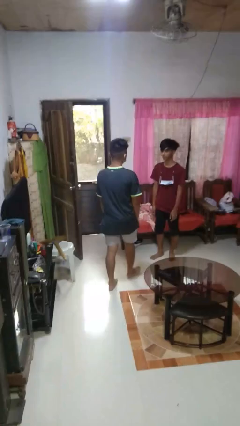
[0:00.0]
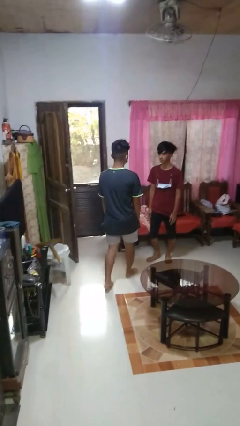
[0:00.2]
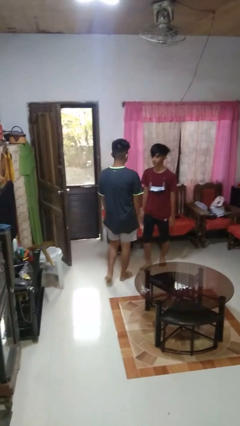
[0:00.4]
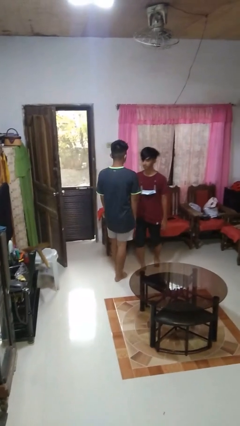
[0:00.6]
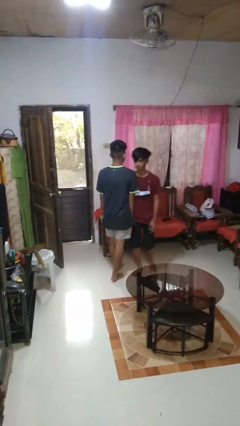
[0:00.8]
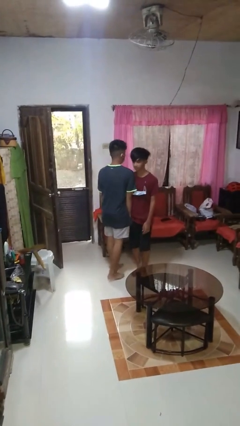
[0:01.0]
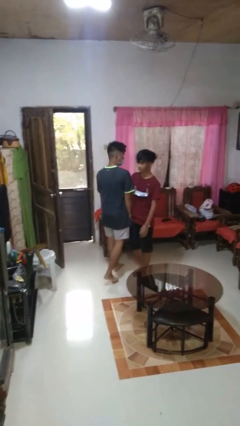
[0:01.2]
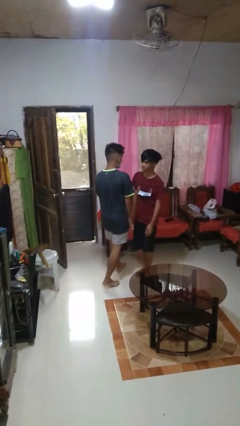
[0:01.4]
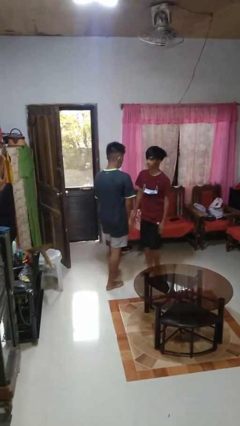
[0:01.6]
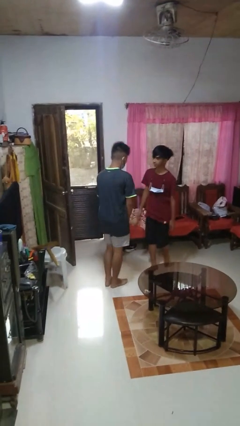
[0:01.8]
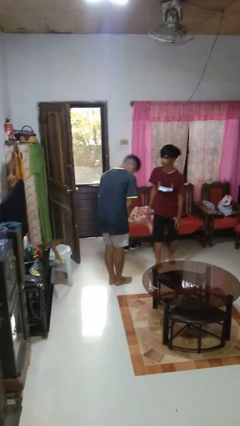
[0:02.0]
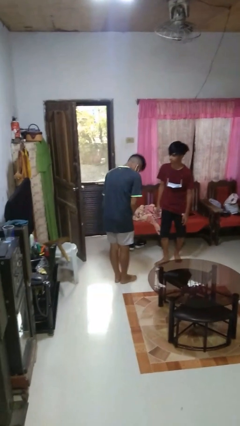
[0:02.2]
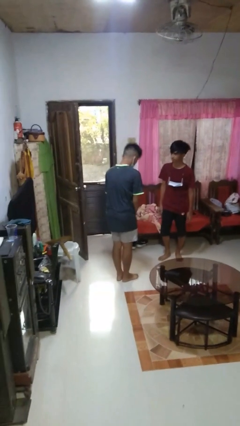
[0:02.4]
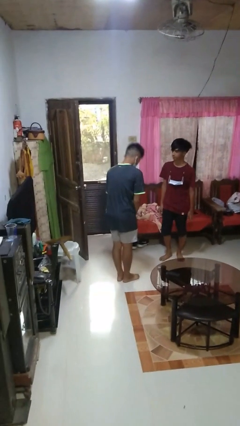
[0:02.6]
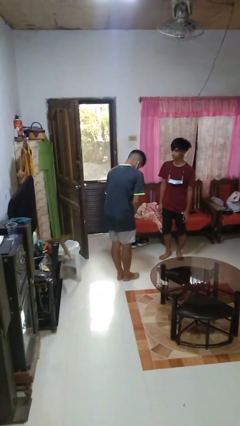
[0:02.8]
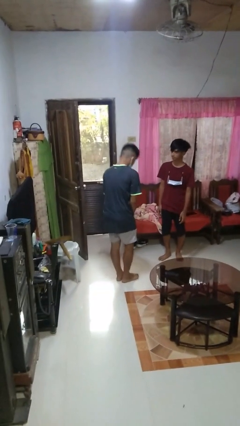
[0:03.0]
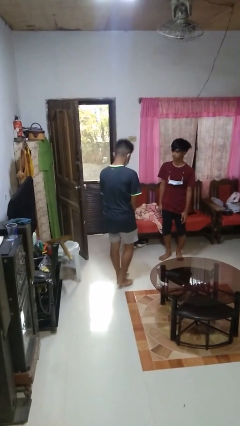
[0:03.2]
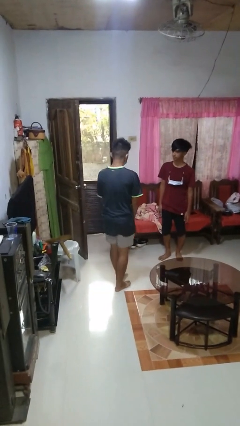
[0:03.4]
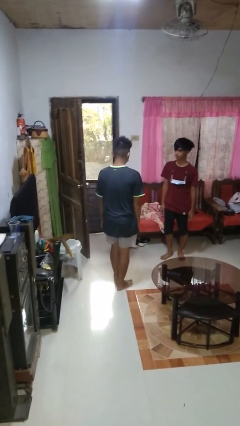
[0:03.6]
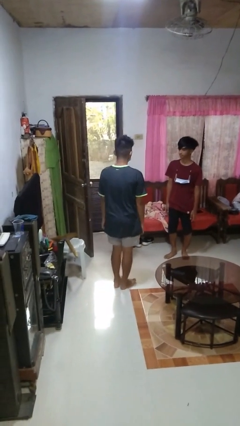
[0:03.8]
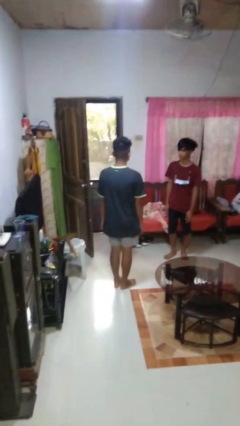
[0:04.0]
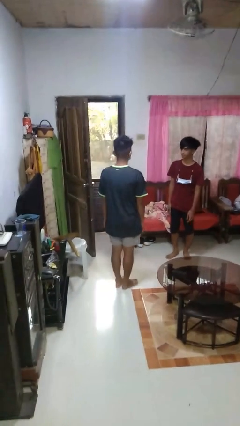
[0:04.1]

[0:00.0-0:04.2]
person bumps into person

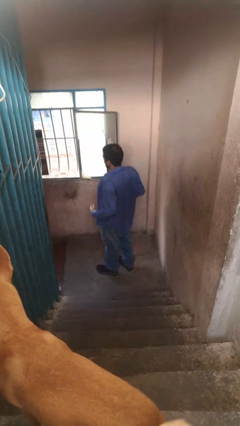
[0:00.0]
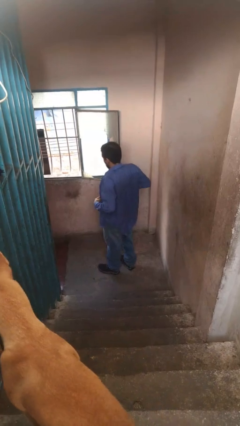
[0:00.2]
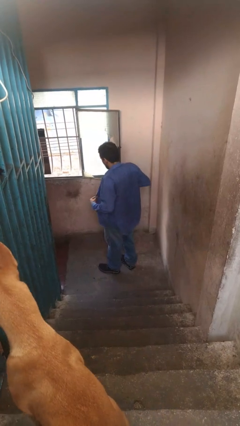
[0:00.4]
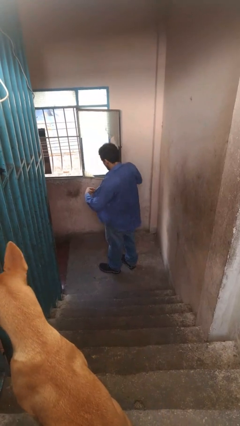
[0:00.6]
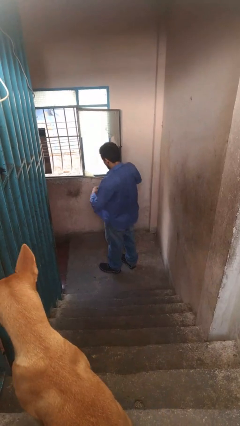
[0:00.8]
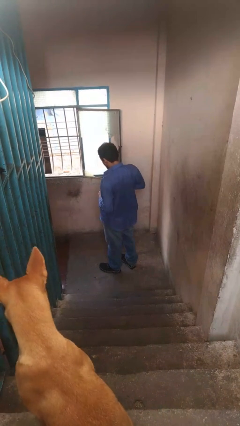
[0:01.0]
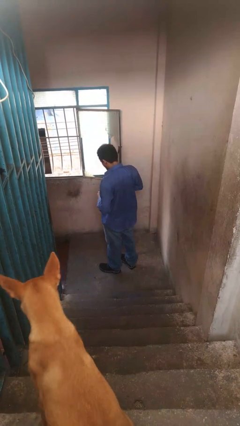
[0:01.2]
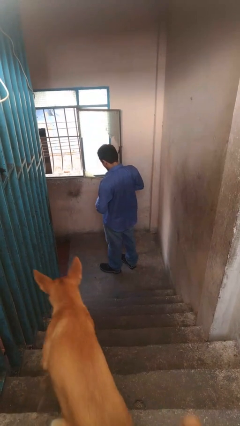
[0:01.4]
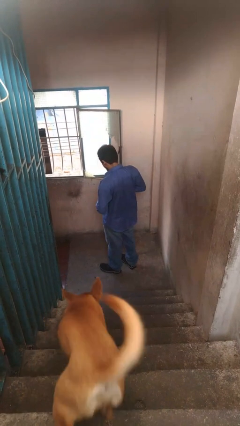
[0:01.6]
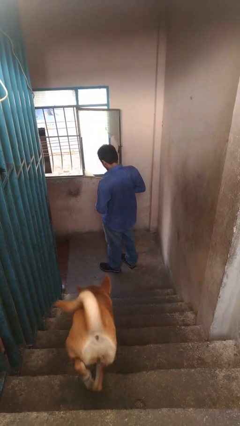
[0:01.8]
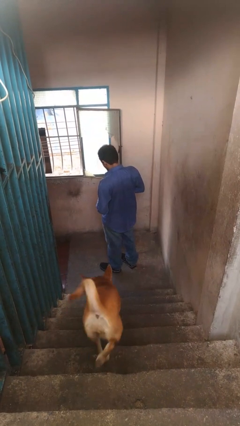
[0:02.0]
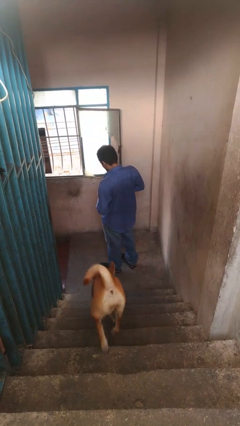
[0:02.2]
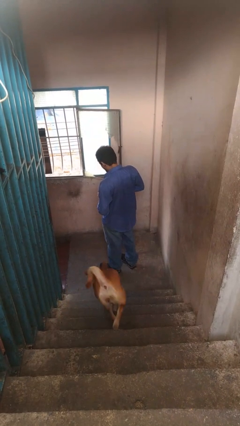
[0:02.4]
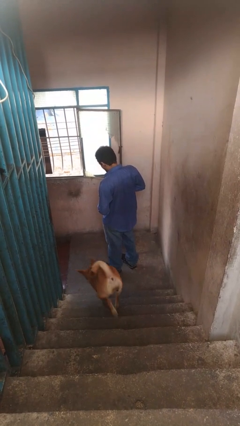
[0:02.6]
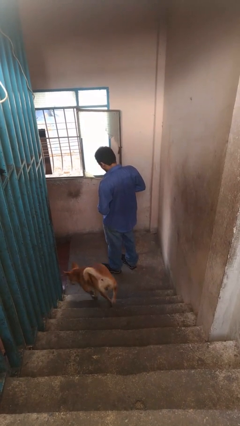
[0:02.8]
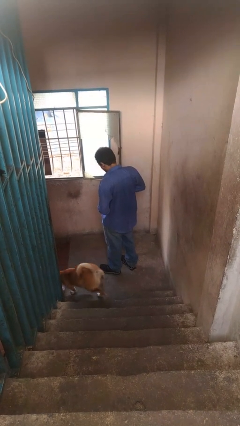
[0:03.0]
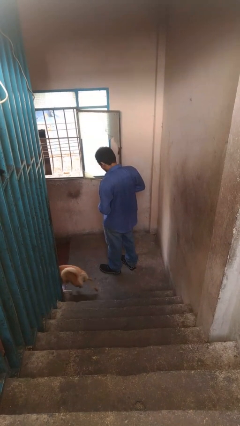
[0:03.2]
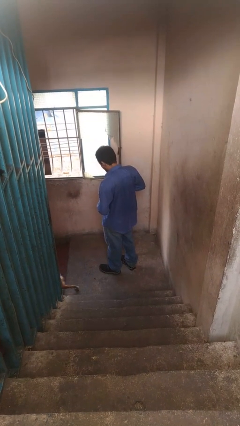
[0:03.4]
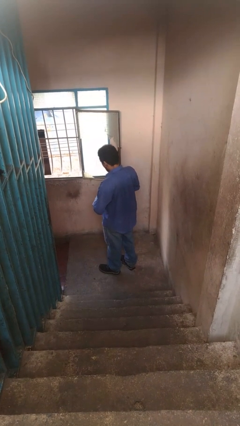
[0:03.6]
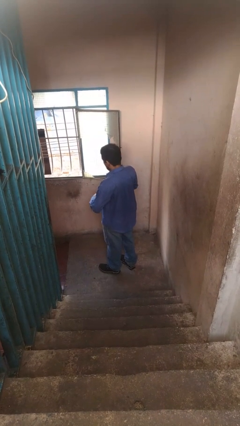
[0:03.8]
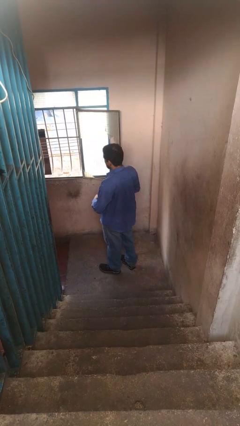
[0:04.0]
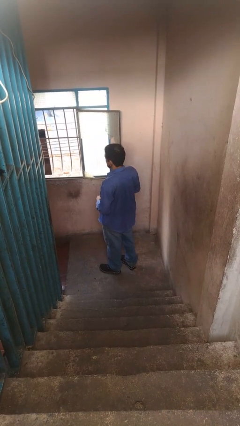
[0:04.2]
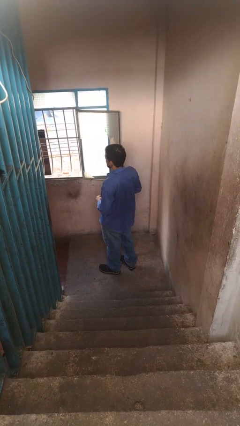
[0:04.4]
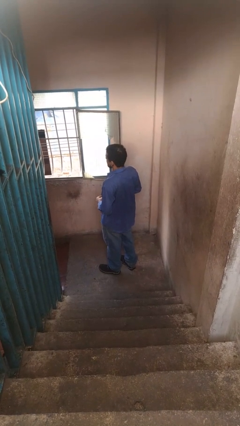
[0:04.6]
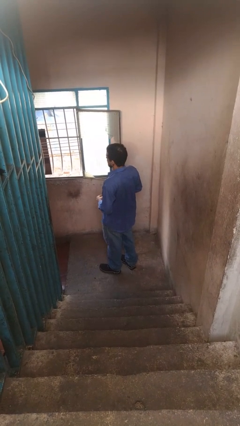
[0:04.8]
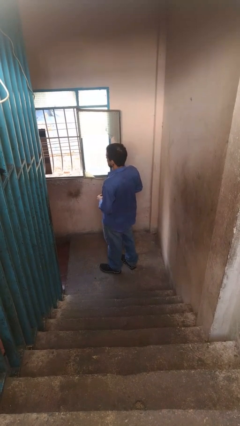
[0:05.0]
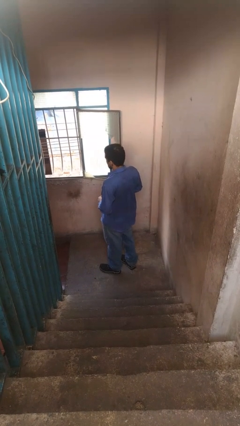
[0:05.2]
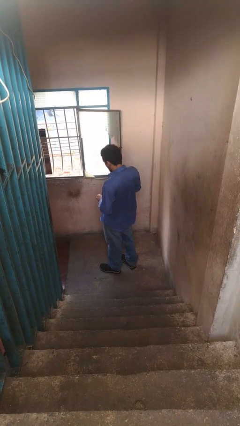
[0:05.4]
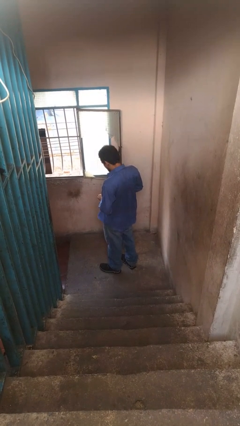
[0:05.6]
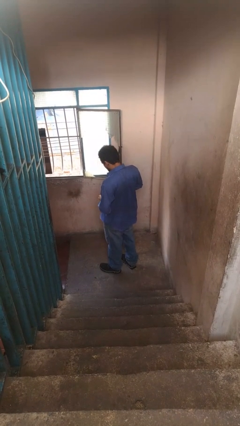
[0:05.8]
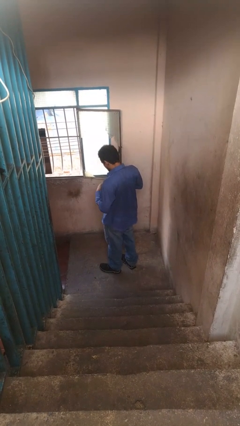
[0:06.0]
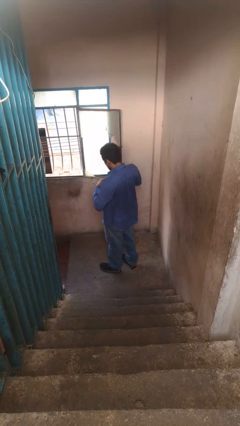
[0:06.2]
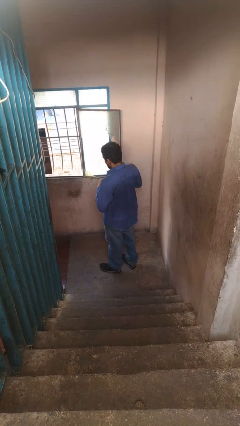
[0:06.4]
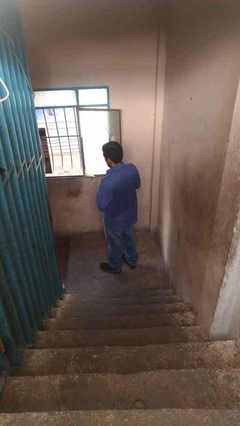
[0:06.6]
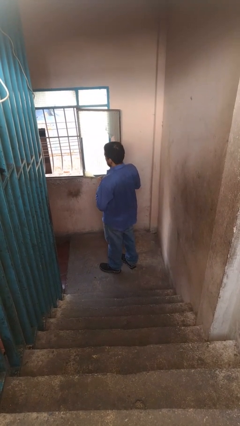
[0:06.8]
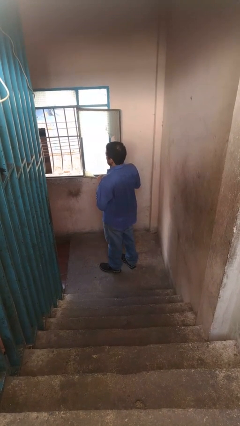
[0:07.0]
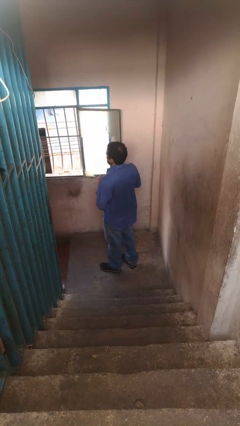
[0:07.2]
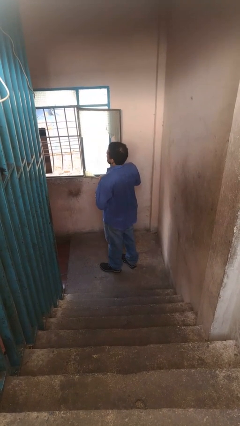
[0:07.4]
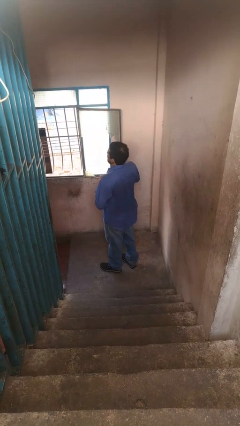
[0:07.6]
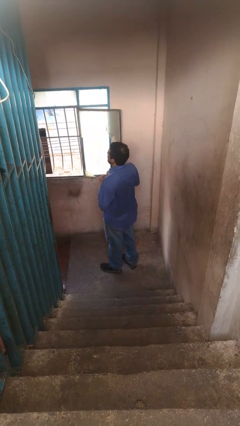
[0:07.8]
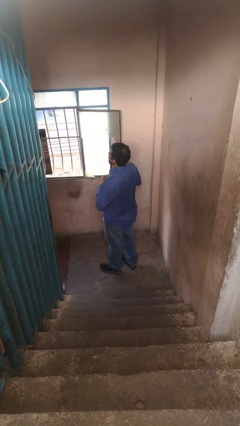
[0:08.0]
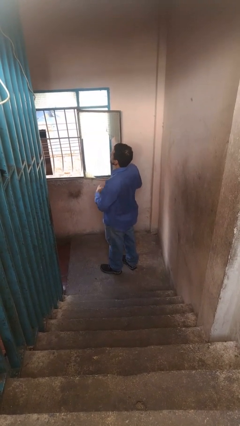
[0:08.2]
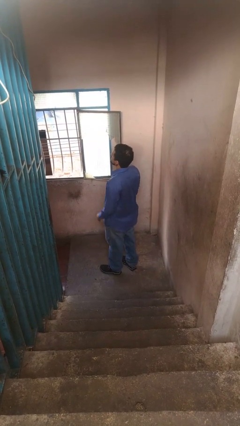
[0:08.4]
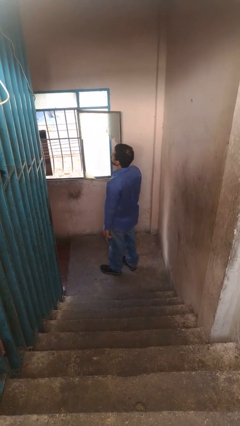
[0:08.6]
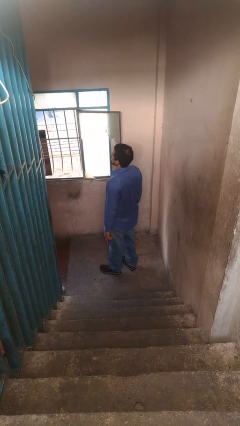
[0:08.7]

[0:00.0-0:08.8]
person buttons shirt

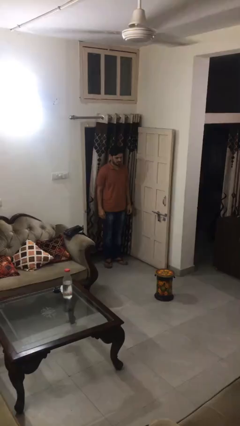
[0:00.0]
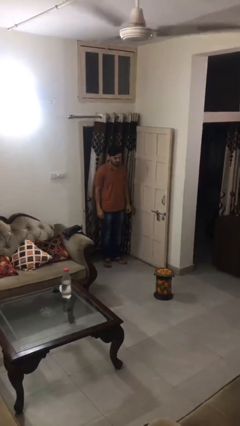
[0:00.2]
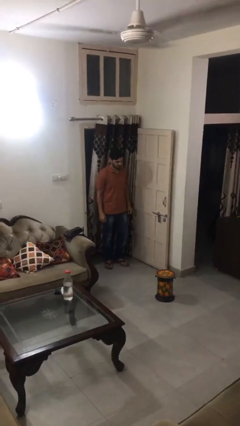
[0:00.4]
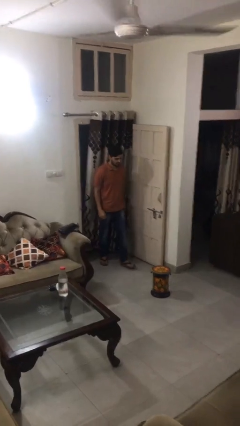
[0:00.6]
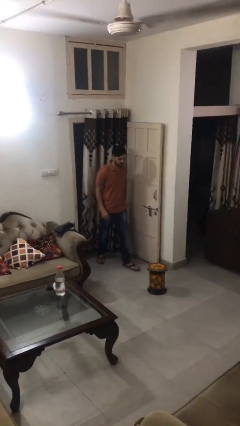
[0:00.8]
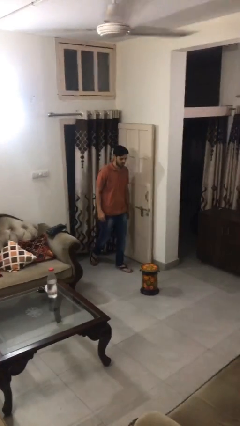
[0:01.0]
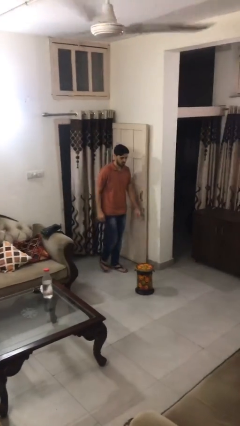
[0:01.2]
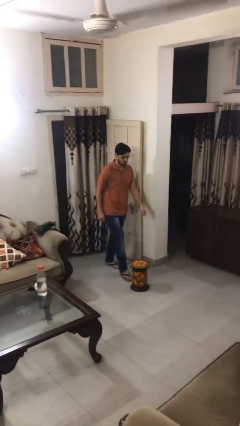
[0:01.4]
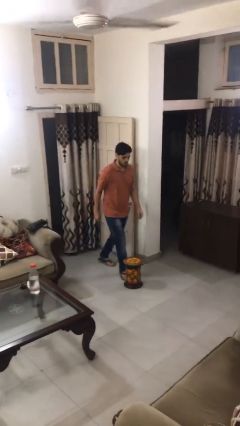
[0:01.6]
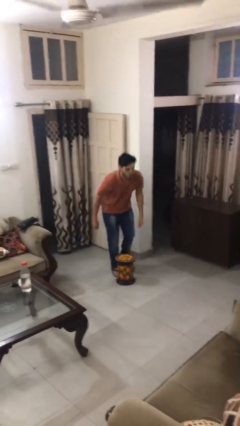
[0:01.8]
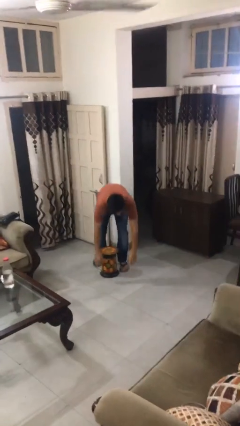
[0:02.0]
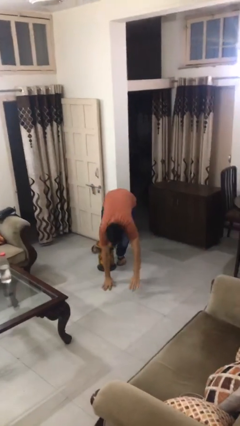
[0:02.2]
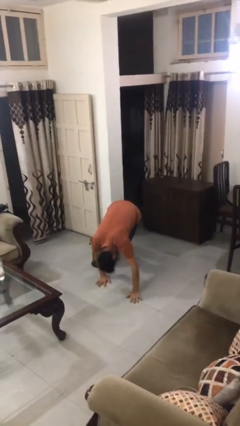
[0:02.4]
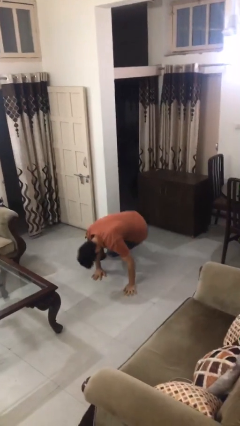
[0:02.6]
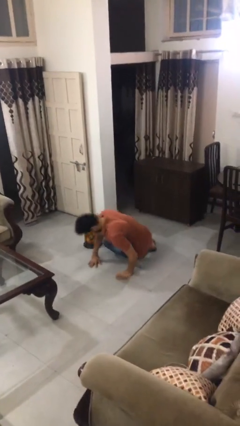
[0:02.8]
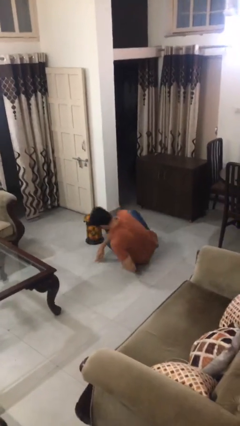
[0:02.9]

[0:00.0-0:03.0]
person trips on object on floor

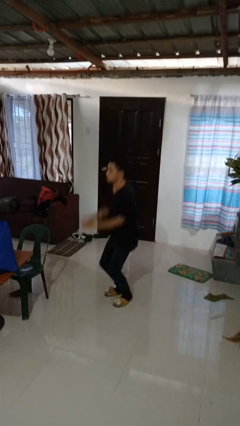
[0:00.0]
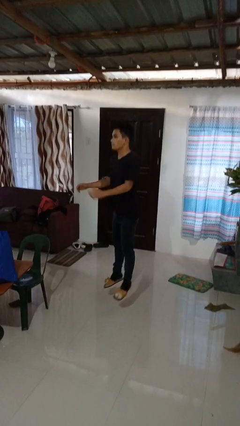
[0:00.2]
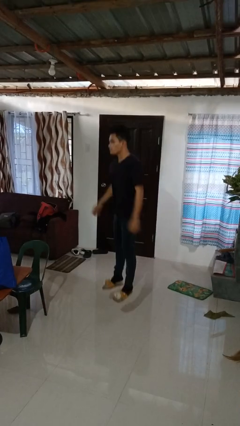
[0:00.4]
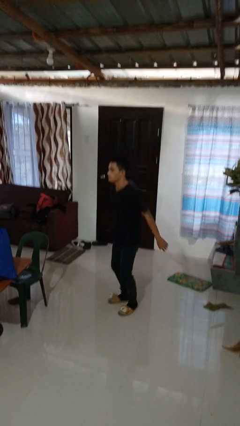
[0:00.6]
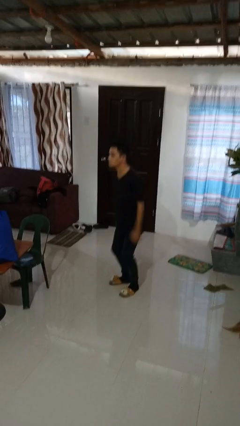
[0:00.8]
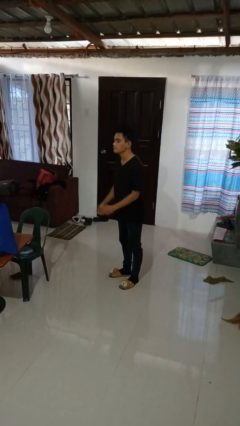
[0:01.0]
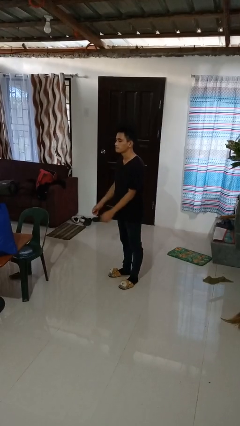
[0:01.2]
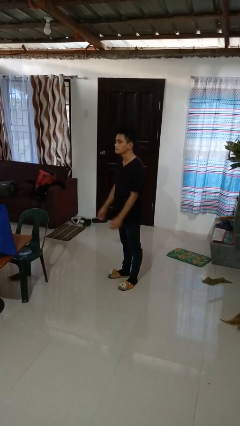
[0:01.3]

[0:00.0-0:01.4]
person jumps

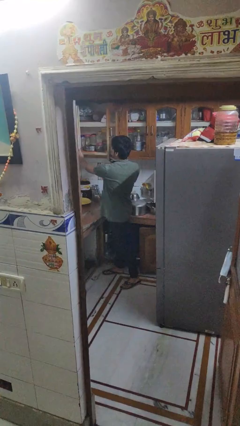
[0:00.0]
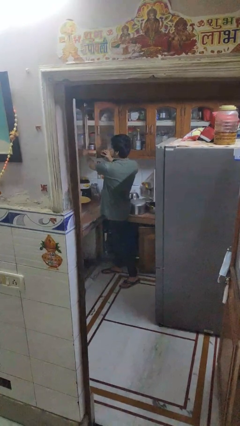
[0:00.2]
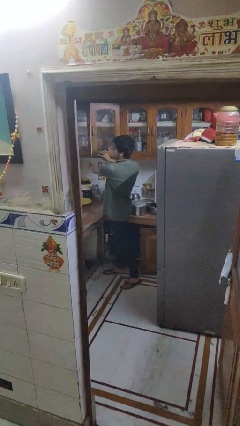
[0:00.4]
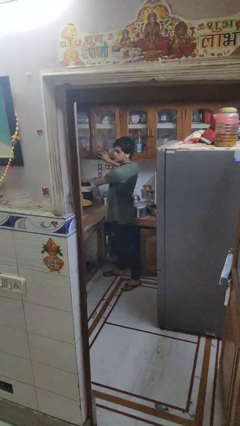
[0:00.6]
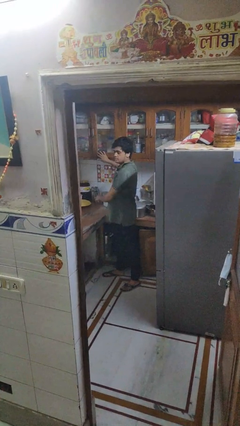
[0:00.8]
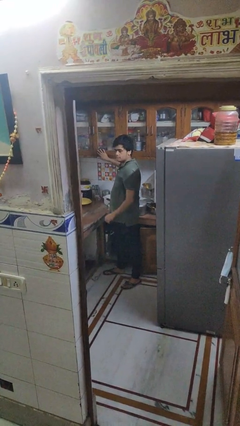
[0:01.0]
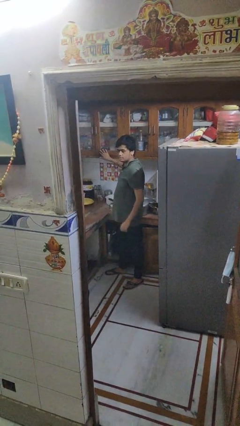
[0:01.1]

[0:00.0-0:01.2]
person closes cabinet
